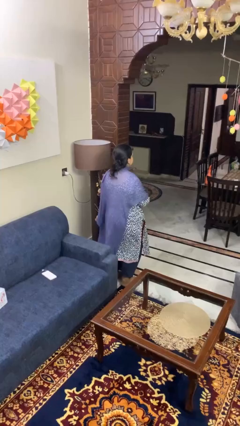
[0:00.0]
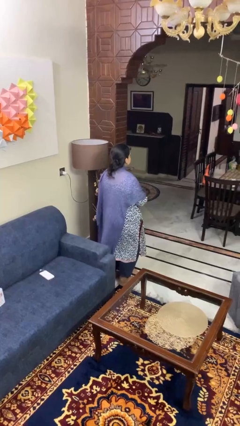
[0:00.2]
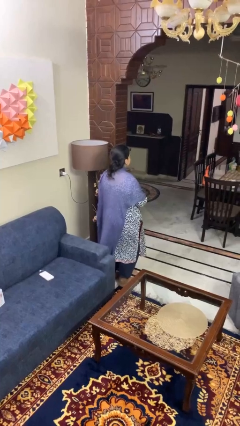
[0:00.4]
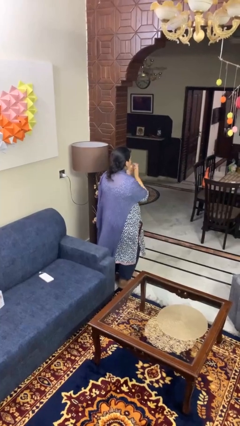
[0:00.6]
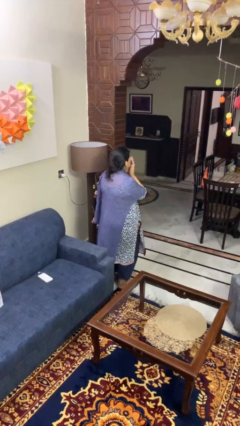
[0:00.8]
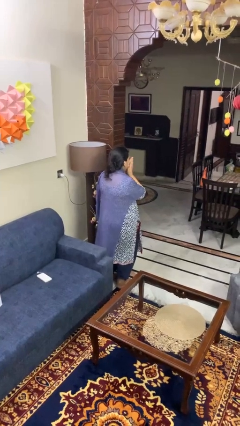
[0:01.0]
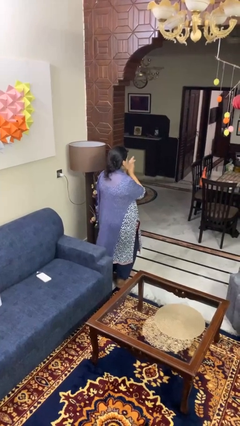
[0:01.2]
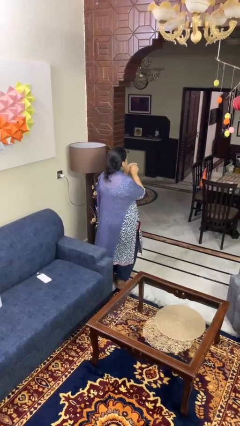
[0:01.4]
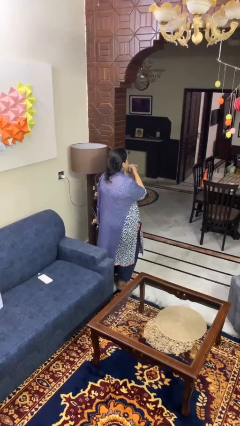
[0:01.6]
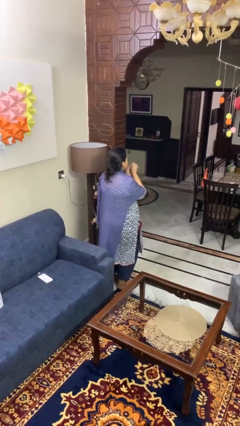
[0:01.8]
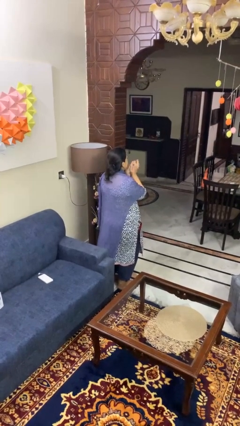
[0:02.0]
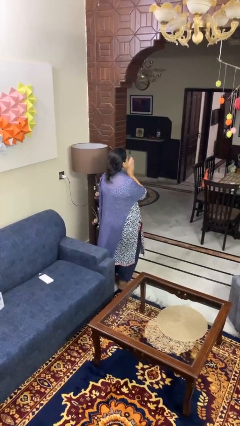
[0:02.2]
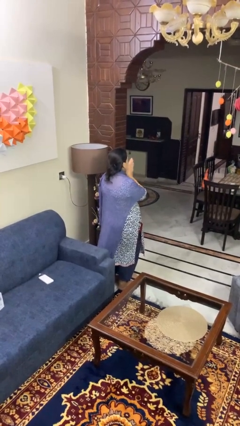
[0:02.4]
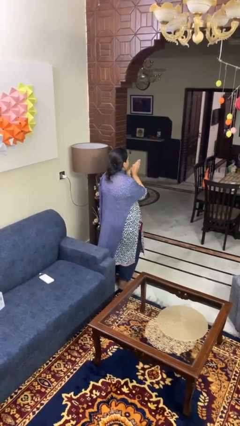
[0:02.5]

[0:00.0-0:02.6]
person blows into hands

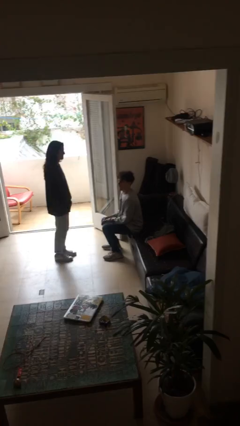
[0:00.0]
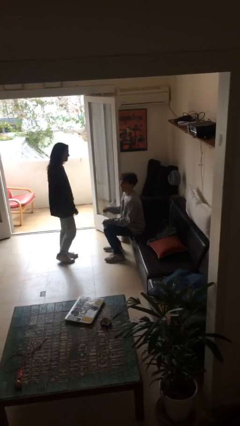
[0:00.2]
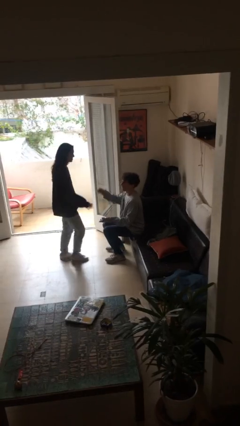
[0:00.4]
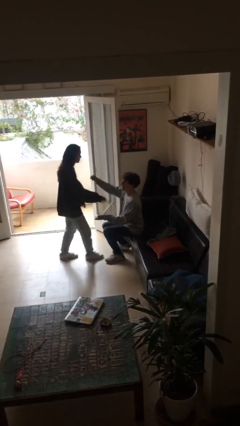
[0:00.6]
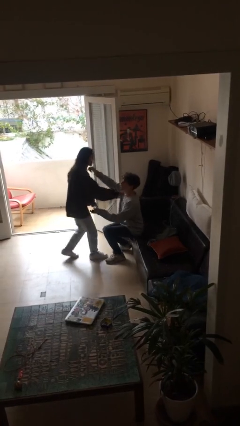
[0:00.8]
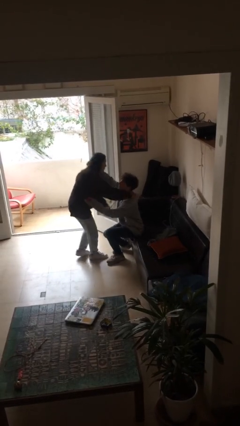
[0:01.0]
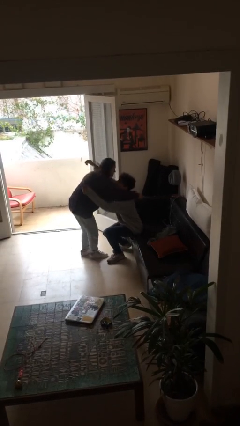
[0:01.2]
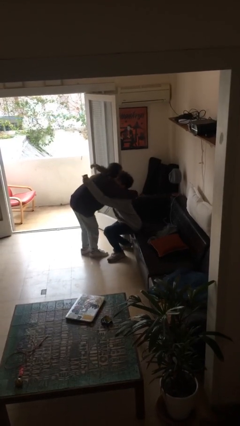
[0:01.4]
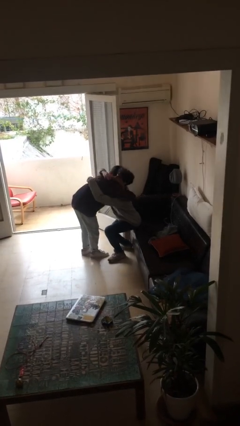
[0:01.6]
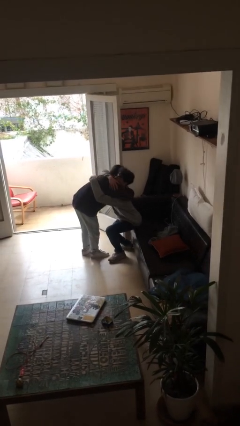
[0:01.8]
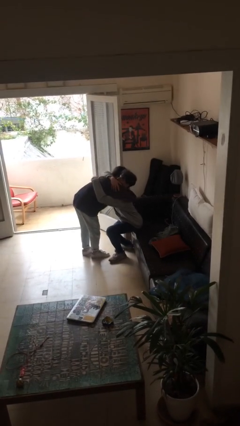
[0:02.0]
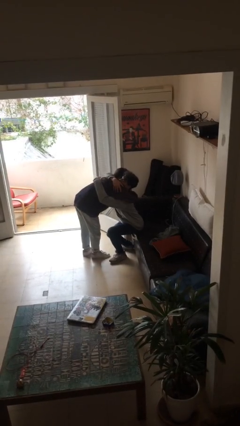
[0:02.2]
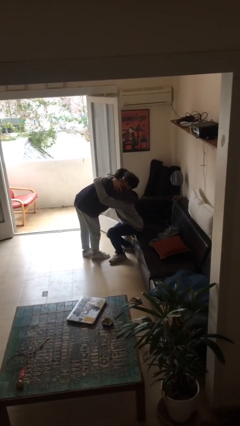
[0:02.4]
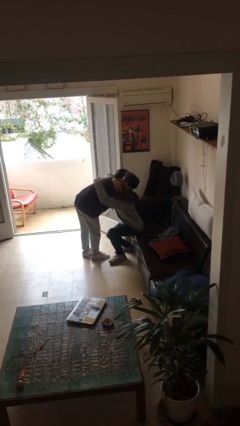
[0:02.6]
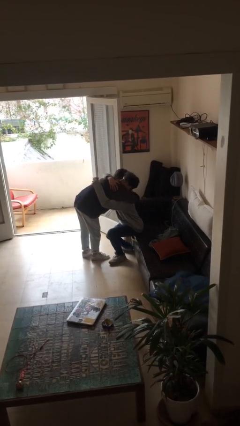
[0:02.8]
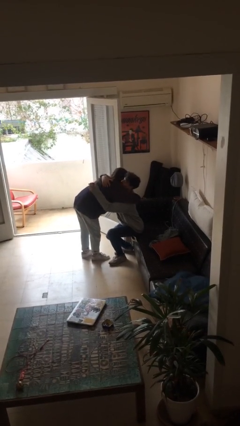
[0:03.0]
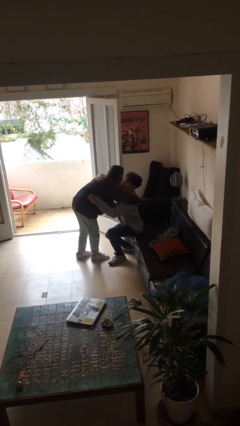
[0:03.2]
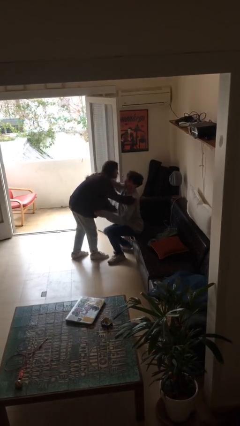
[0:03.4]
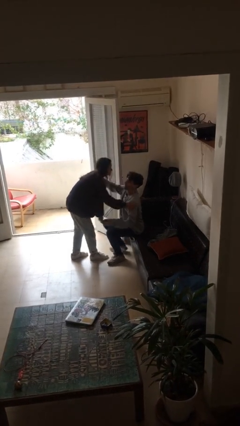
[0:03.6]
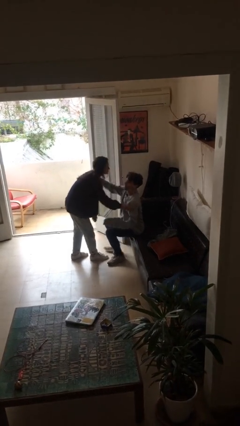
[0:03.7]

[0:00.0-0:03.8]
person embraces person

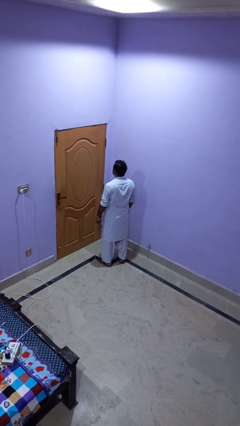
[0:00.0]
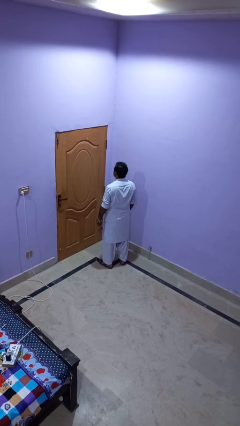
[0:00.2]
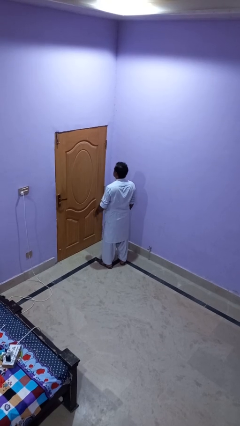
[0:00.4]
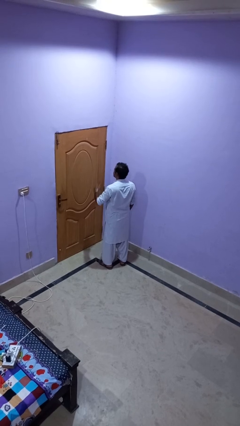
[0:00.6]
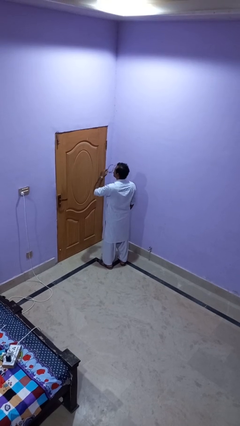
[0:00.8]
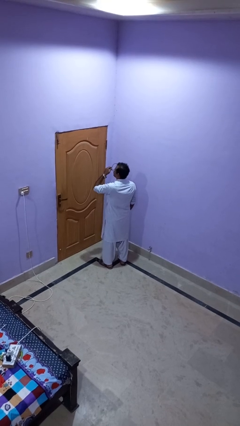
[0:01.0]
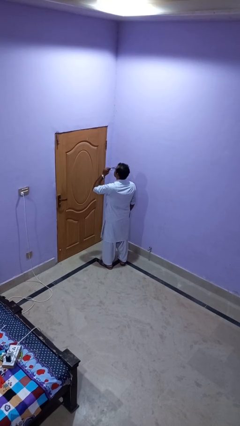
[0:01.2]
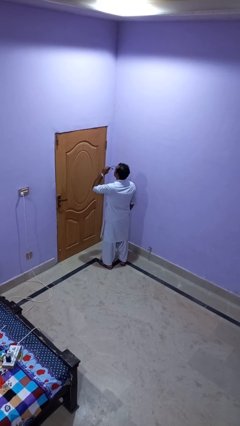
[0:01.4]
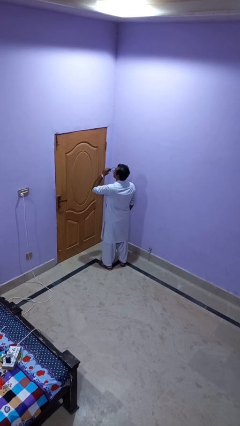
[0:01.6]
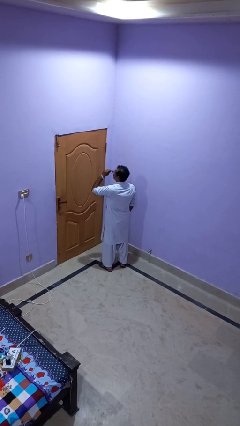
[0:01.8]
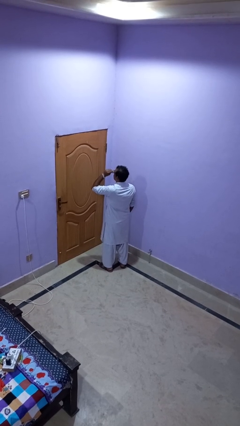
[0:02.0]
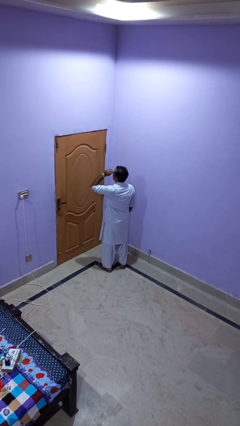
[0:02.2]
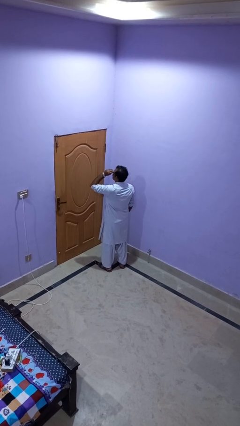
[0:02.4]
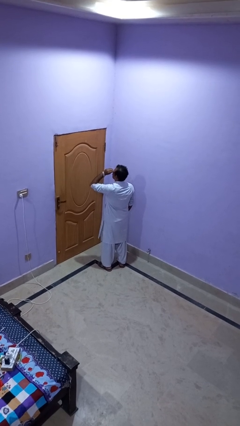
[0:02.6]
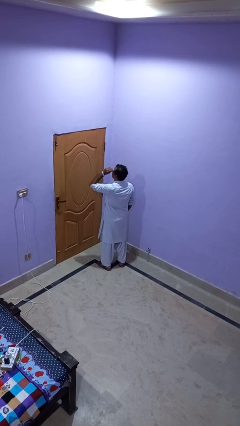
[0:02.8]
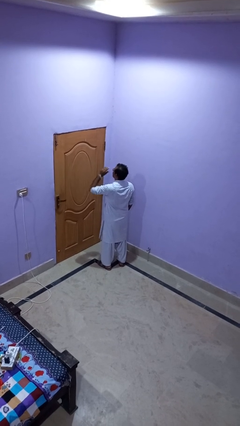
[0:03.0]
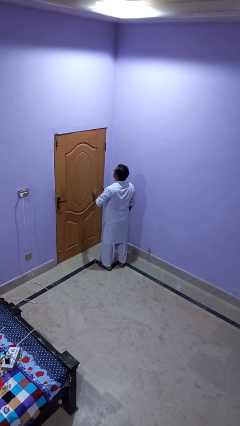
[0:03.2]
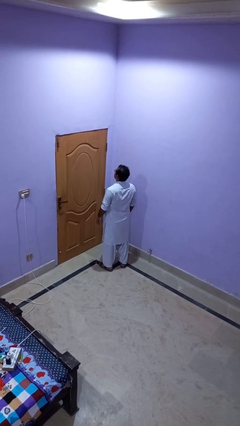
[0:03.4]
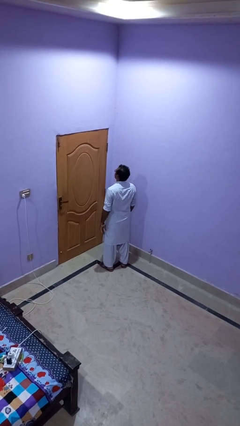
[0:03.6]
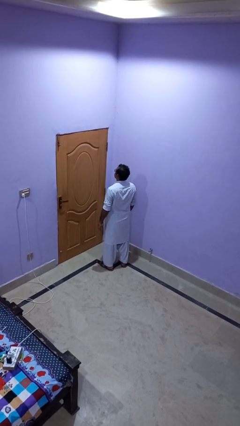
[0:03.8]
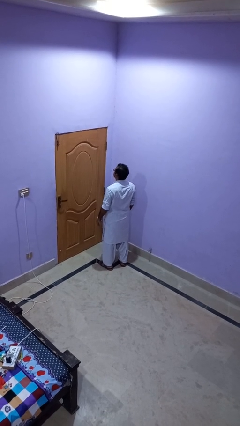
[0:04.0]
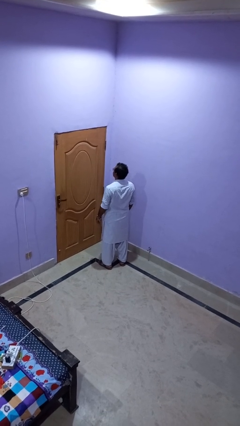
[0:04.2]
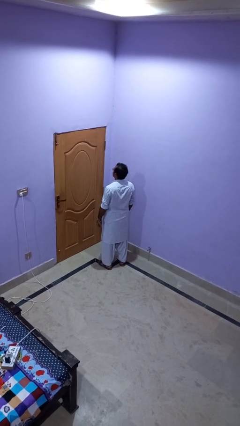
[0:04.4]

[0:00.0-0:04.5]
person puts on glasses

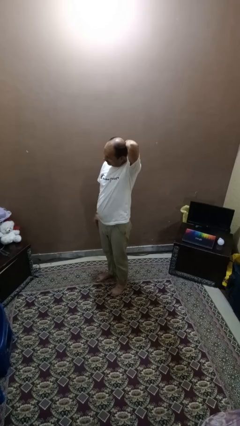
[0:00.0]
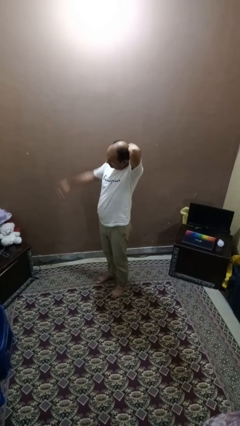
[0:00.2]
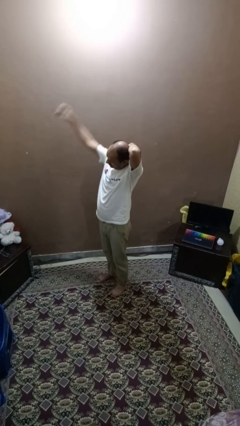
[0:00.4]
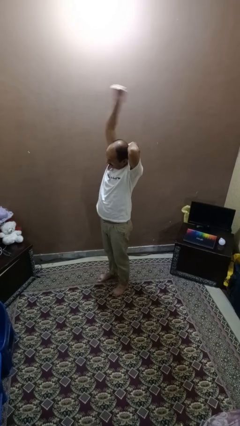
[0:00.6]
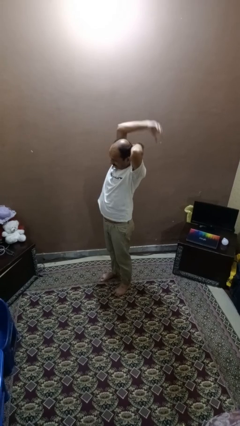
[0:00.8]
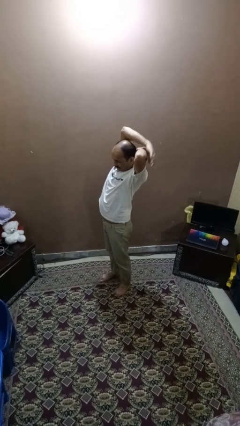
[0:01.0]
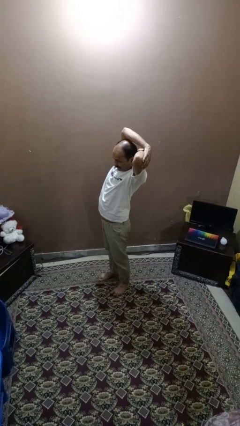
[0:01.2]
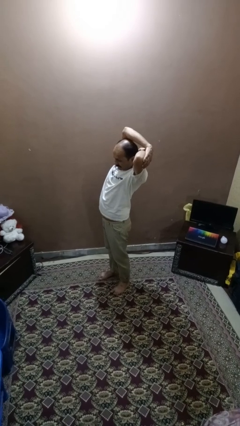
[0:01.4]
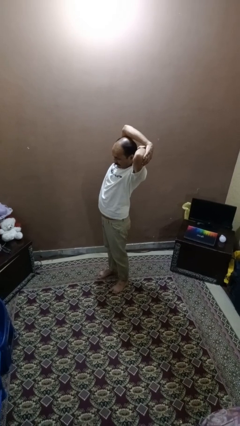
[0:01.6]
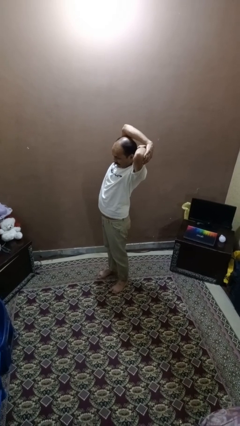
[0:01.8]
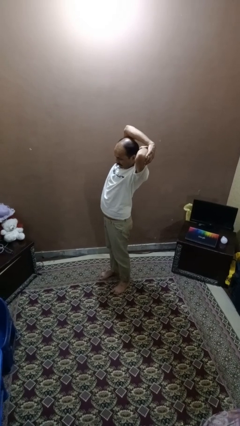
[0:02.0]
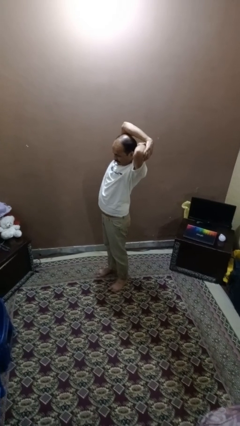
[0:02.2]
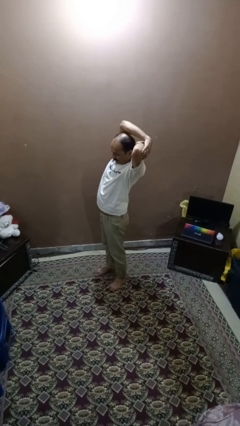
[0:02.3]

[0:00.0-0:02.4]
person stretches arms over head

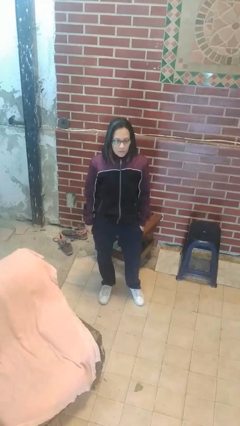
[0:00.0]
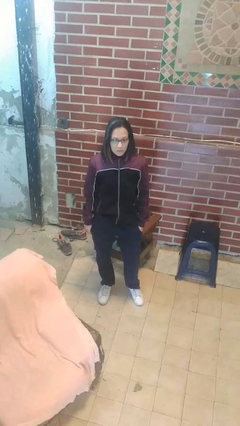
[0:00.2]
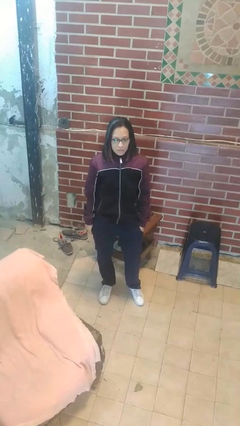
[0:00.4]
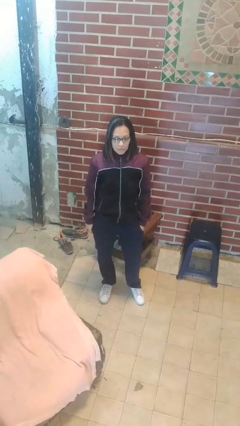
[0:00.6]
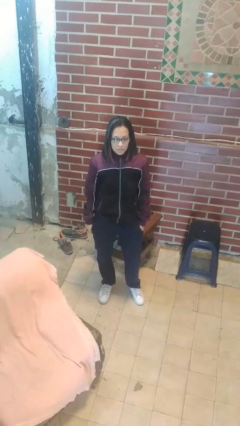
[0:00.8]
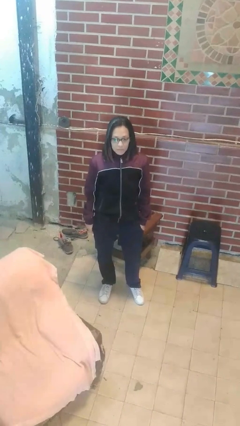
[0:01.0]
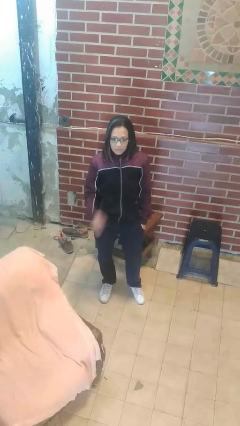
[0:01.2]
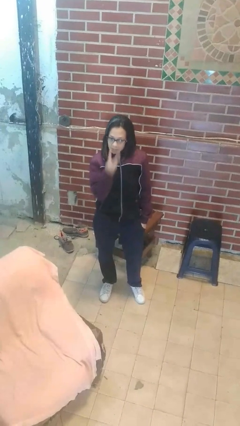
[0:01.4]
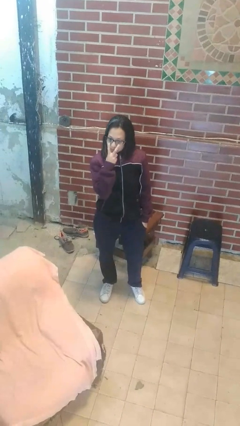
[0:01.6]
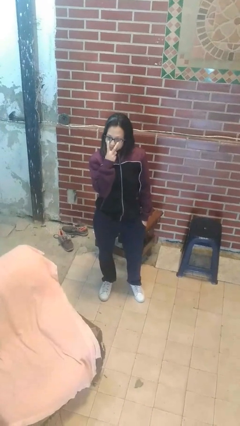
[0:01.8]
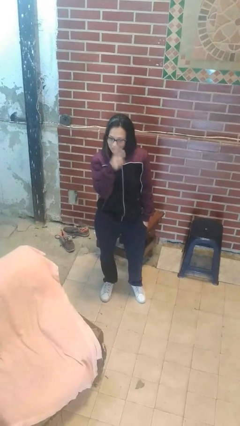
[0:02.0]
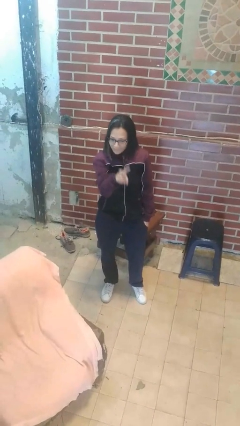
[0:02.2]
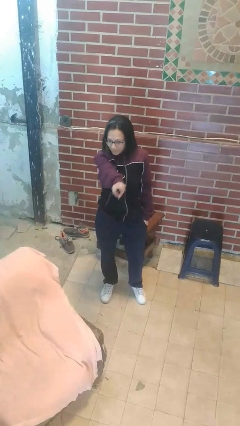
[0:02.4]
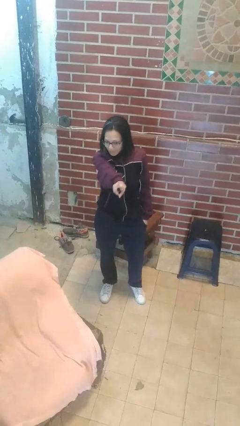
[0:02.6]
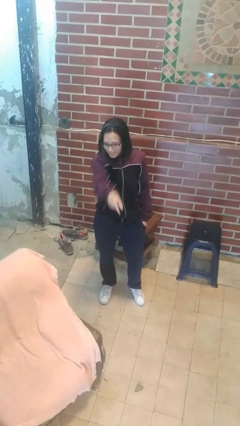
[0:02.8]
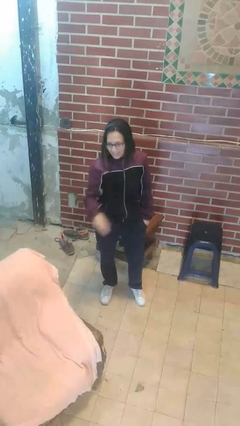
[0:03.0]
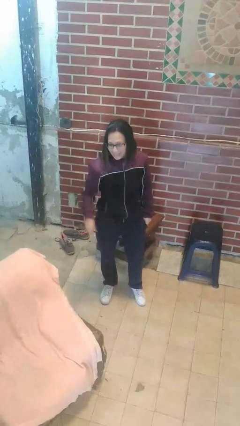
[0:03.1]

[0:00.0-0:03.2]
person gestures watch closely

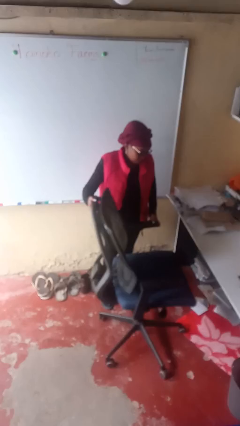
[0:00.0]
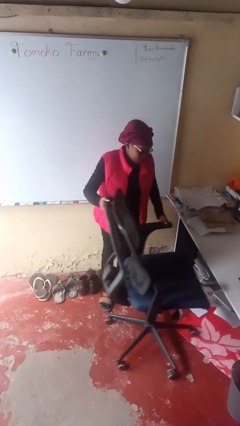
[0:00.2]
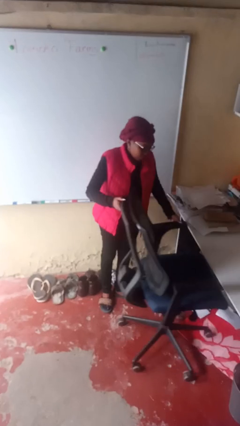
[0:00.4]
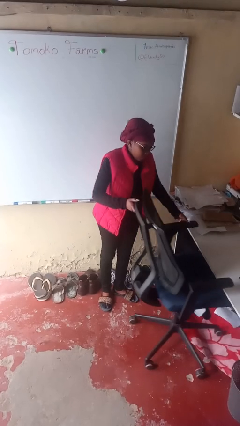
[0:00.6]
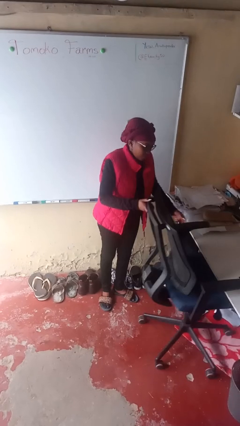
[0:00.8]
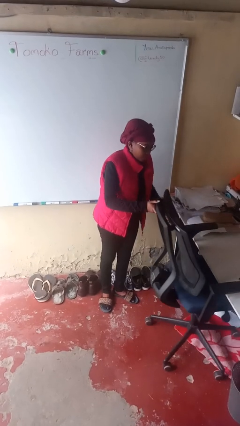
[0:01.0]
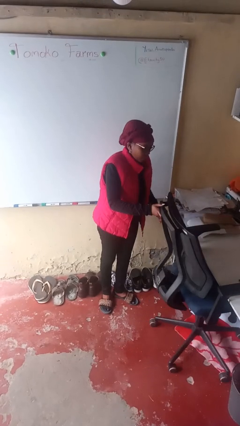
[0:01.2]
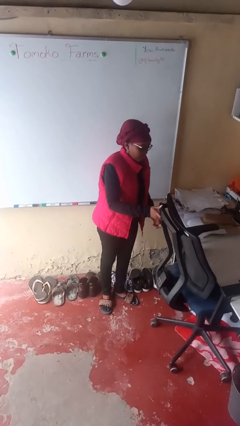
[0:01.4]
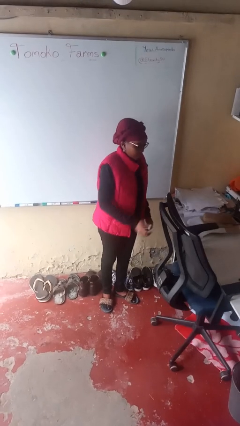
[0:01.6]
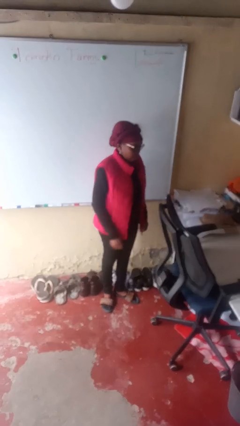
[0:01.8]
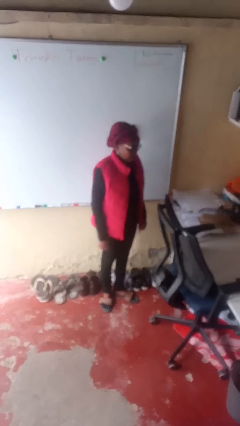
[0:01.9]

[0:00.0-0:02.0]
person pushes in chair
